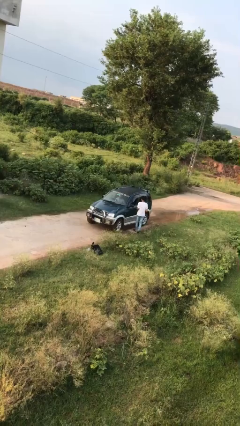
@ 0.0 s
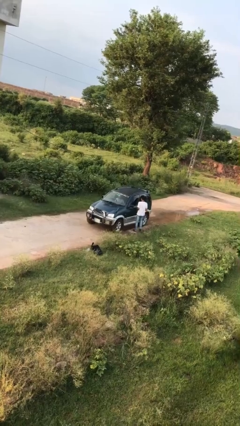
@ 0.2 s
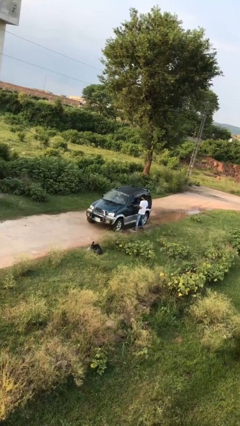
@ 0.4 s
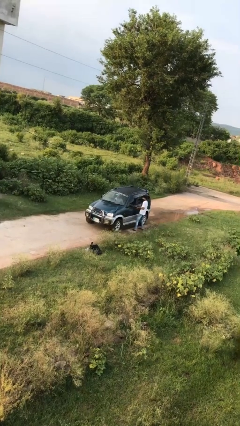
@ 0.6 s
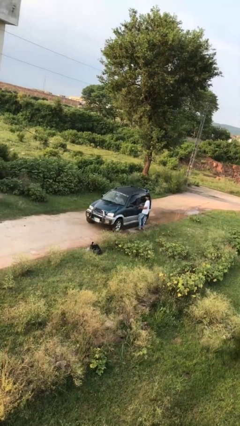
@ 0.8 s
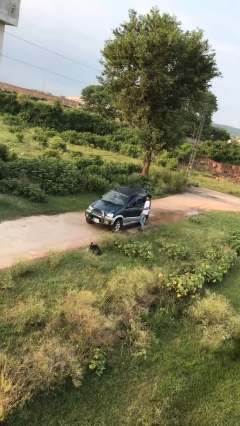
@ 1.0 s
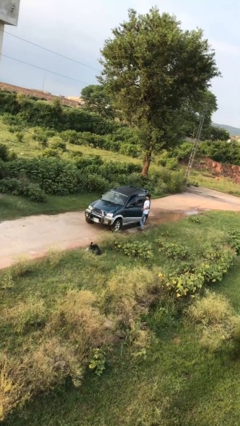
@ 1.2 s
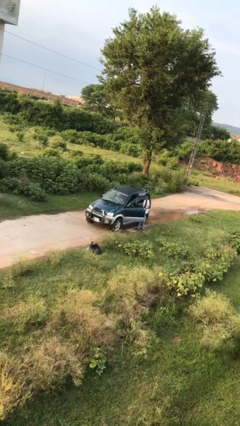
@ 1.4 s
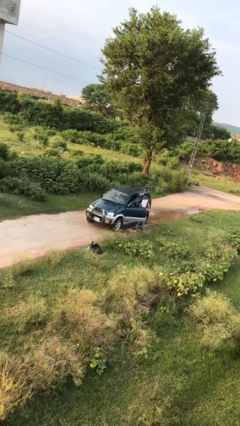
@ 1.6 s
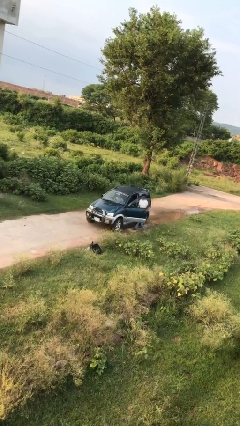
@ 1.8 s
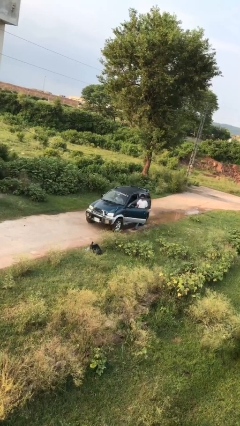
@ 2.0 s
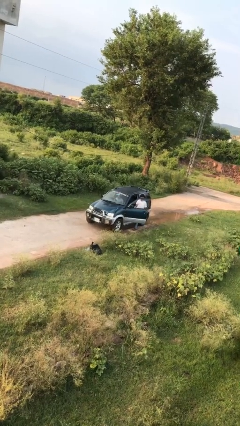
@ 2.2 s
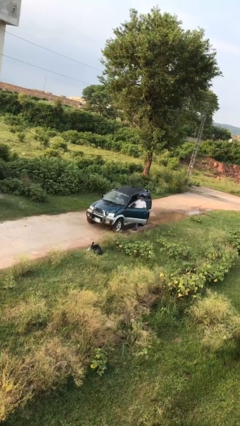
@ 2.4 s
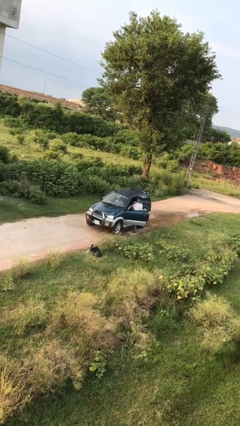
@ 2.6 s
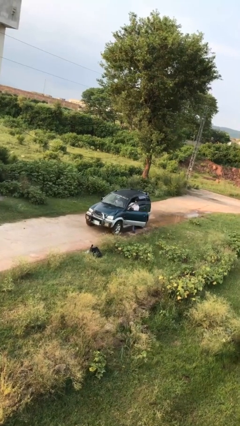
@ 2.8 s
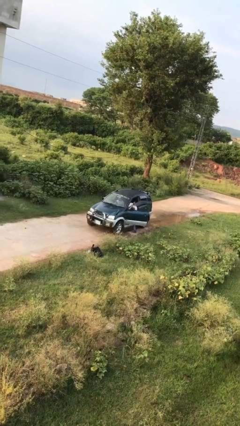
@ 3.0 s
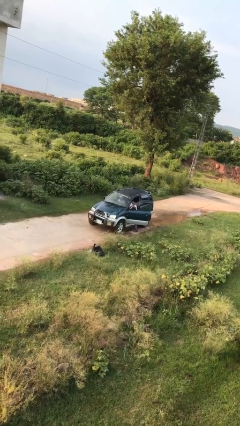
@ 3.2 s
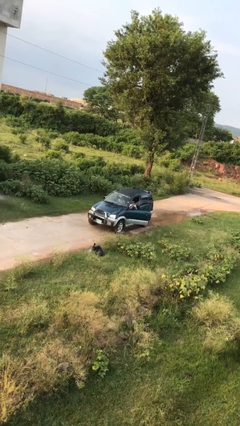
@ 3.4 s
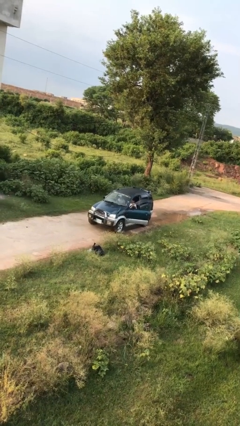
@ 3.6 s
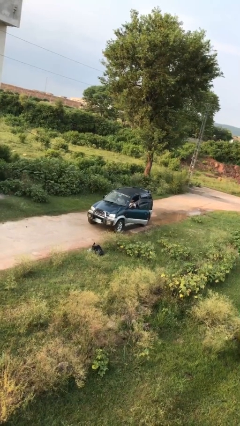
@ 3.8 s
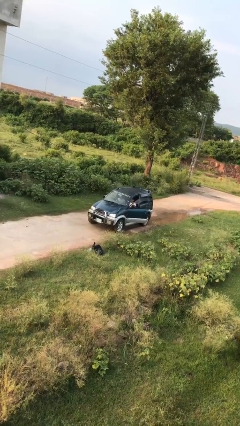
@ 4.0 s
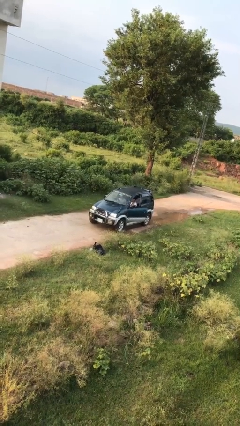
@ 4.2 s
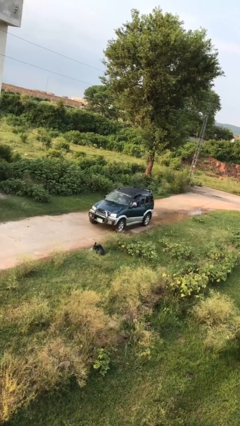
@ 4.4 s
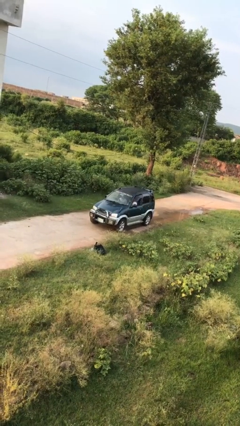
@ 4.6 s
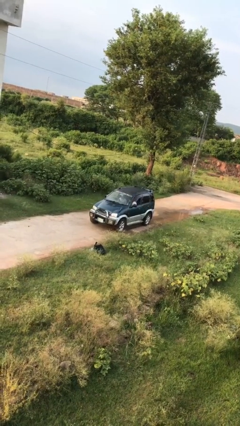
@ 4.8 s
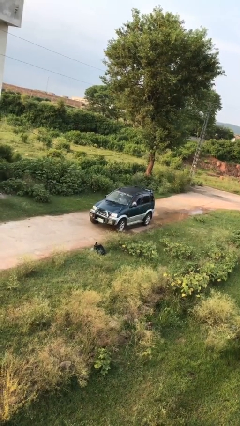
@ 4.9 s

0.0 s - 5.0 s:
car picks up person

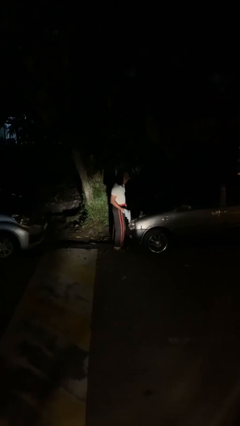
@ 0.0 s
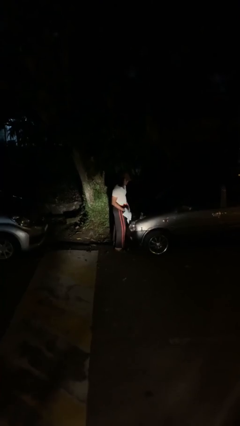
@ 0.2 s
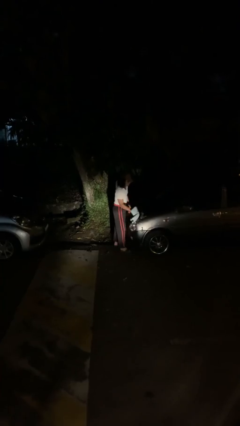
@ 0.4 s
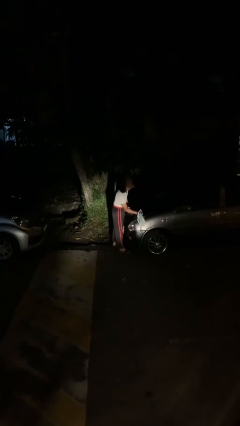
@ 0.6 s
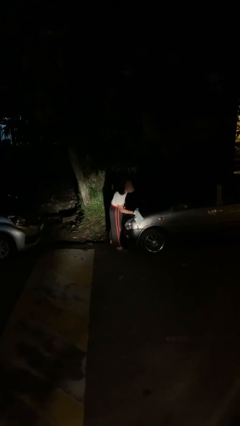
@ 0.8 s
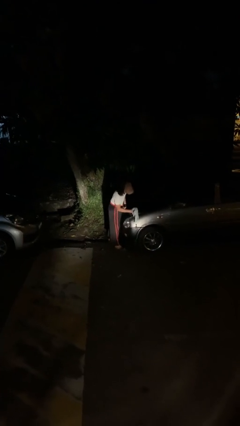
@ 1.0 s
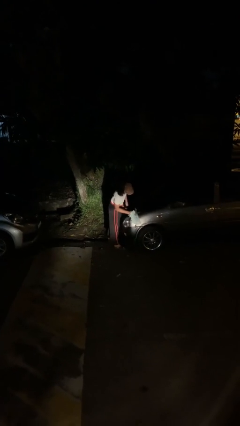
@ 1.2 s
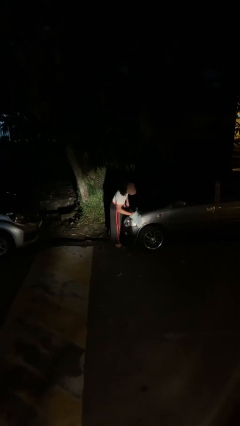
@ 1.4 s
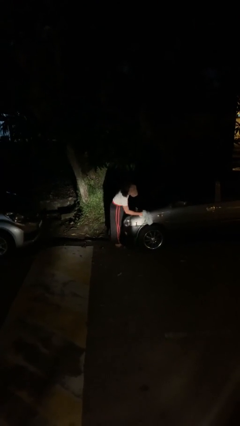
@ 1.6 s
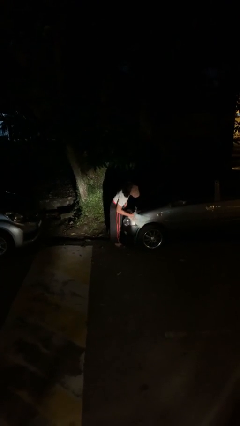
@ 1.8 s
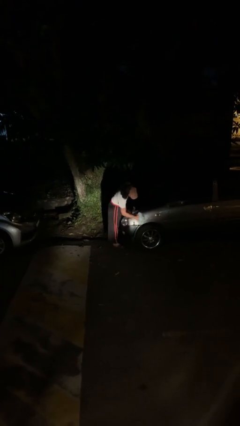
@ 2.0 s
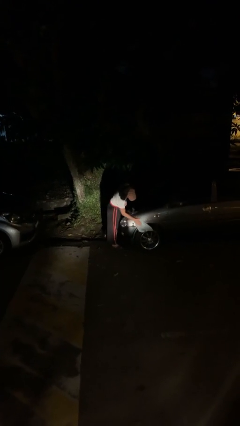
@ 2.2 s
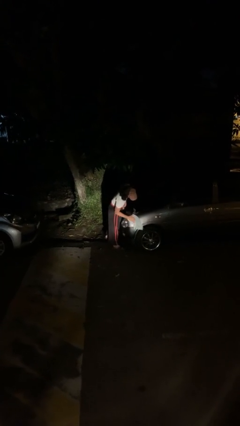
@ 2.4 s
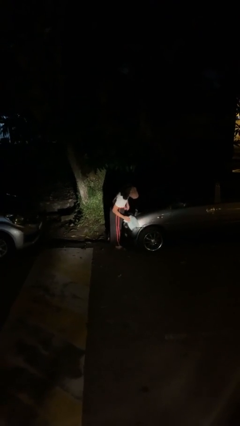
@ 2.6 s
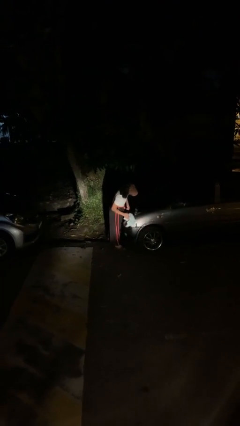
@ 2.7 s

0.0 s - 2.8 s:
person polishes car with rag

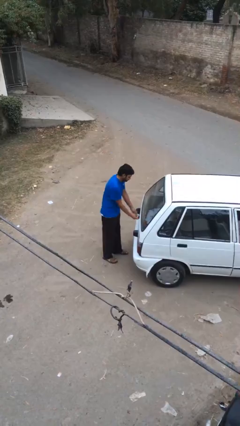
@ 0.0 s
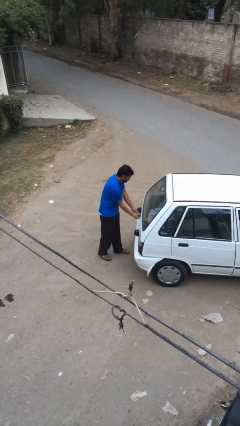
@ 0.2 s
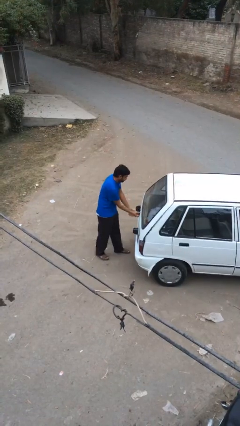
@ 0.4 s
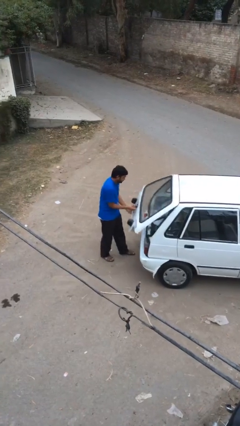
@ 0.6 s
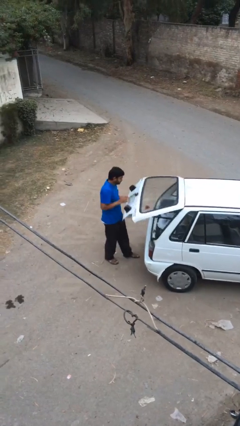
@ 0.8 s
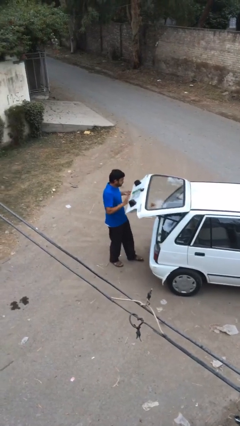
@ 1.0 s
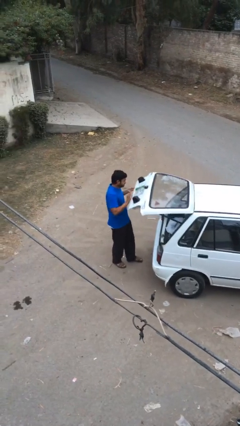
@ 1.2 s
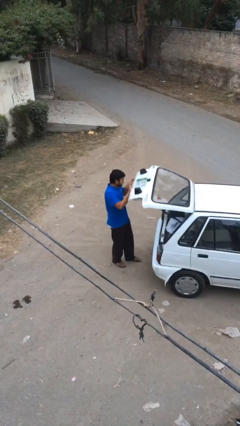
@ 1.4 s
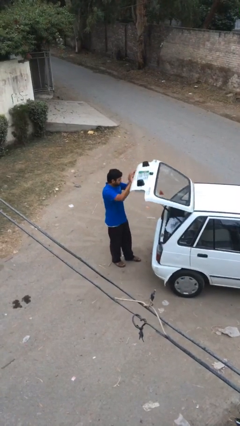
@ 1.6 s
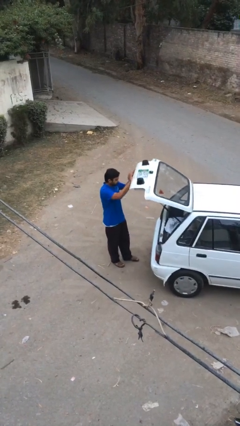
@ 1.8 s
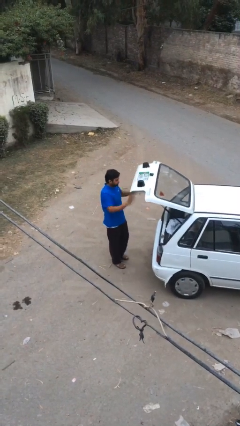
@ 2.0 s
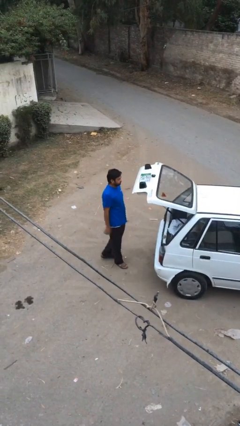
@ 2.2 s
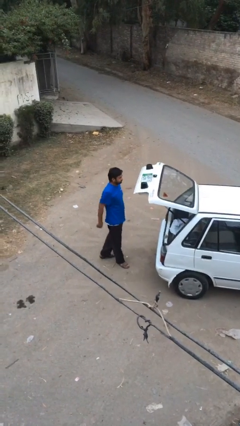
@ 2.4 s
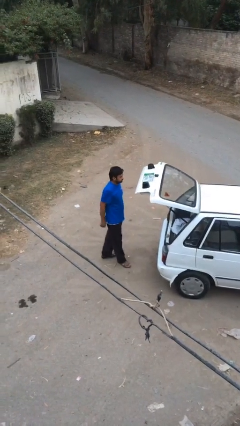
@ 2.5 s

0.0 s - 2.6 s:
person opens car trunk

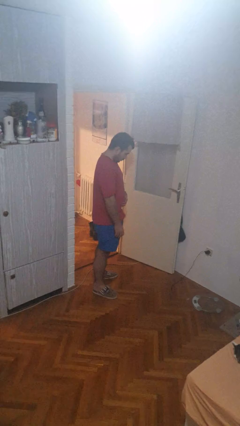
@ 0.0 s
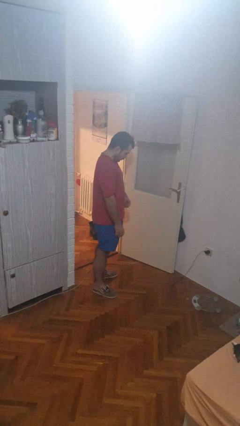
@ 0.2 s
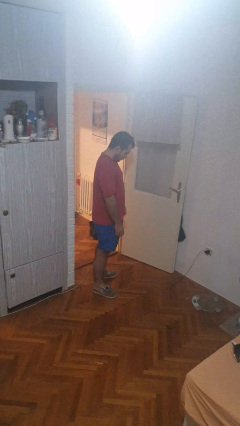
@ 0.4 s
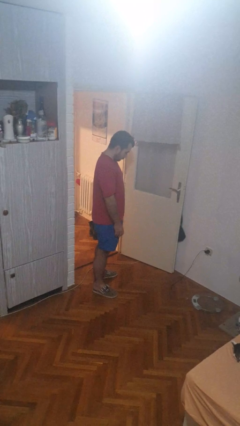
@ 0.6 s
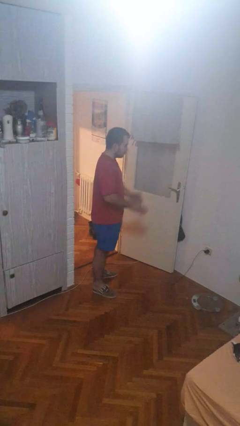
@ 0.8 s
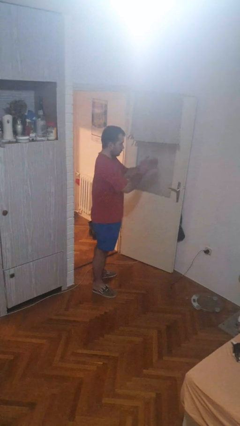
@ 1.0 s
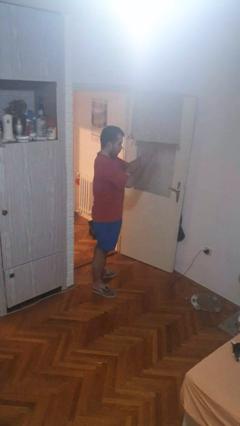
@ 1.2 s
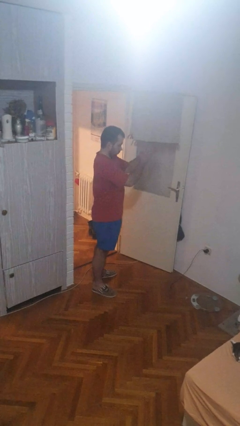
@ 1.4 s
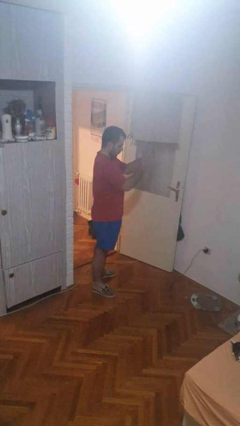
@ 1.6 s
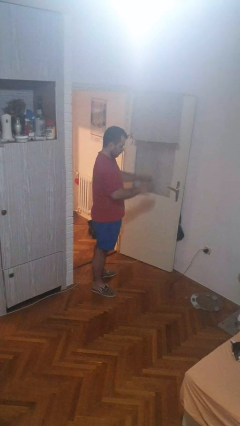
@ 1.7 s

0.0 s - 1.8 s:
person claps hands

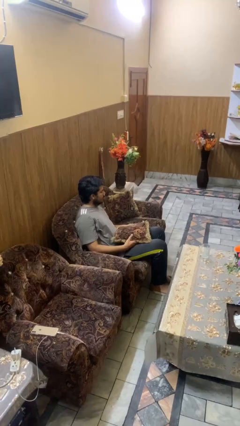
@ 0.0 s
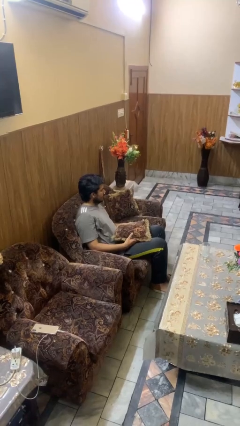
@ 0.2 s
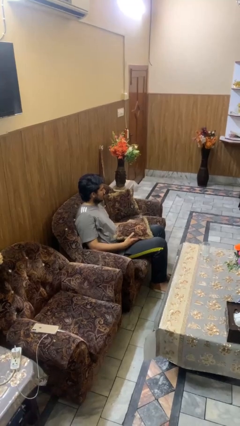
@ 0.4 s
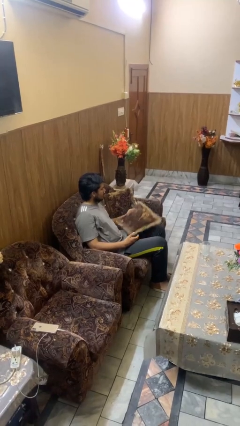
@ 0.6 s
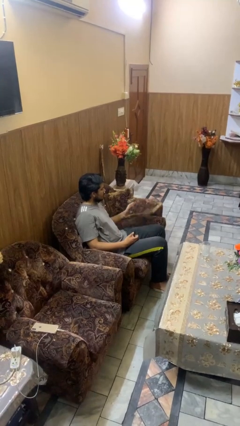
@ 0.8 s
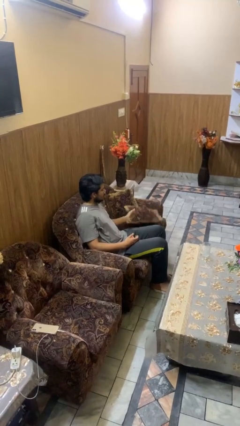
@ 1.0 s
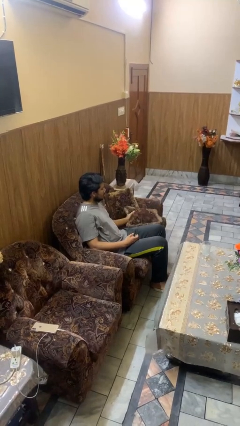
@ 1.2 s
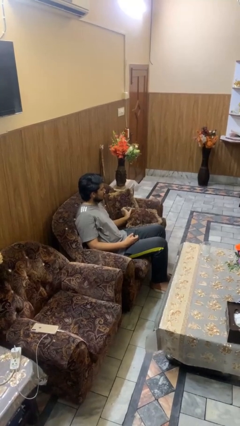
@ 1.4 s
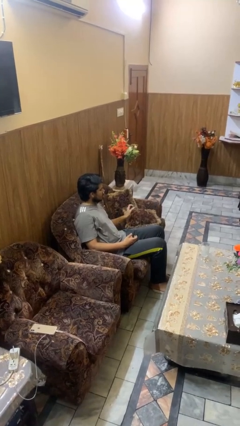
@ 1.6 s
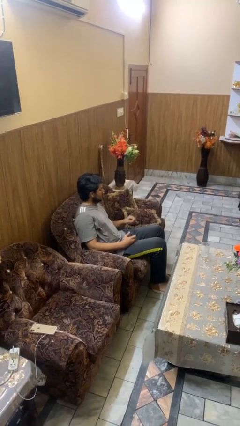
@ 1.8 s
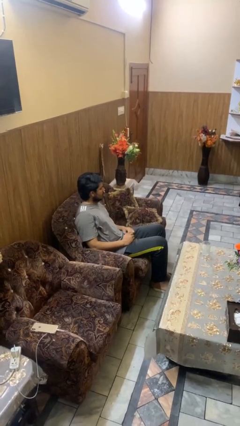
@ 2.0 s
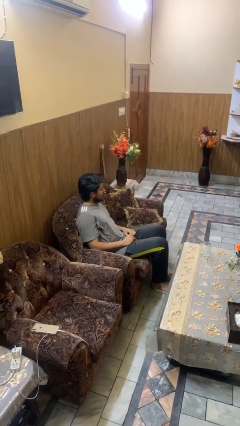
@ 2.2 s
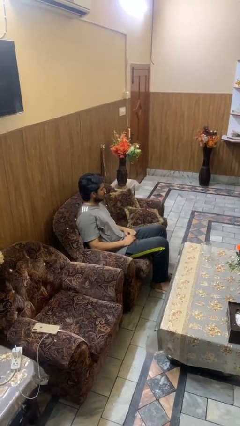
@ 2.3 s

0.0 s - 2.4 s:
person puts down object on couch

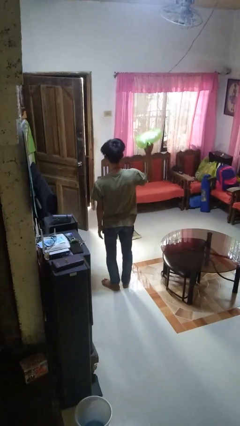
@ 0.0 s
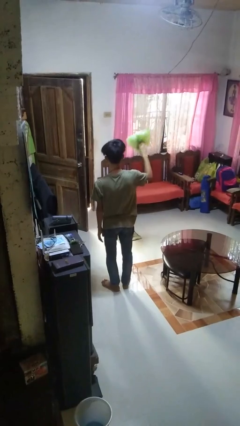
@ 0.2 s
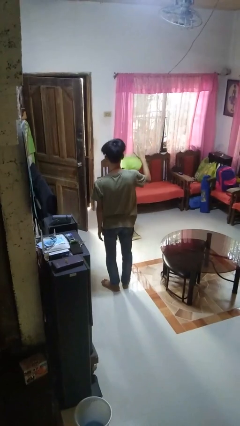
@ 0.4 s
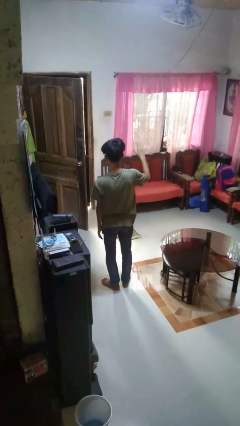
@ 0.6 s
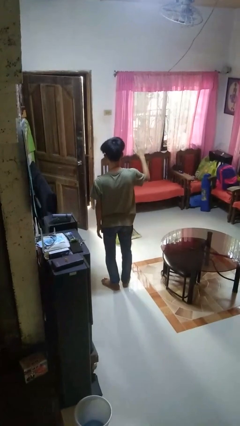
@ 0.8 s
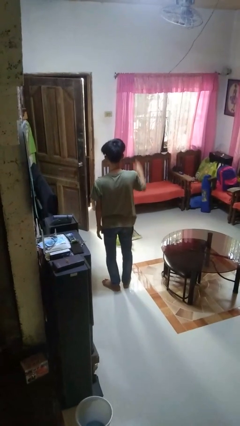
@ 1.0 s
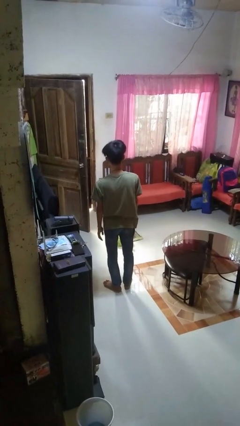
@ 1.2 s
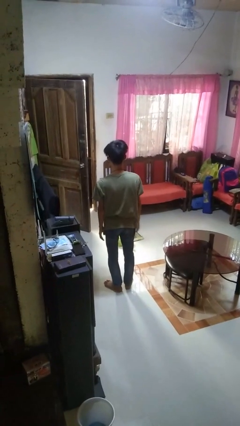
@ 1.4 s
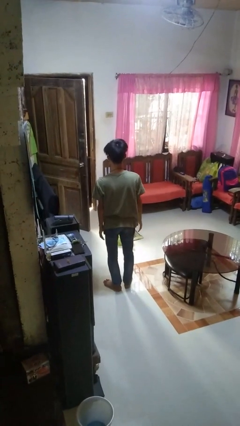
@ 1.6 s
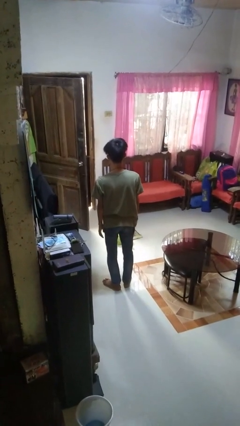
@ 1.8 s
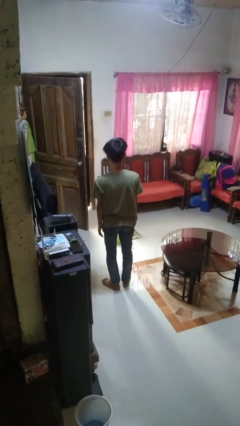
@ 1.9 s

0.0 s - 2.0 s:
person throws object to ground
